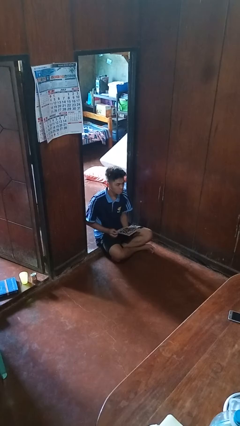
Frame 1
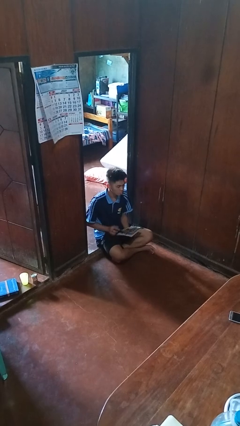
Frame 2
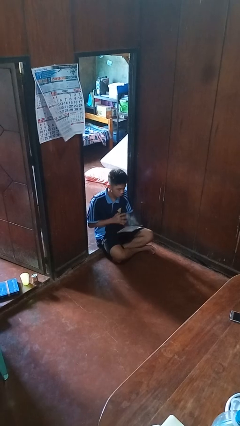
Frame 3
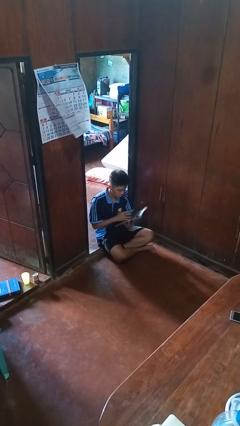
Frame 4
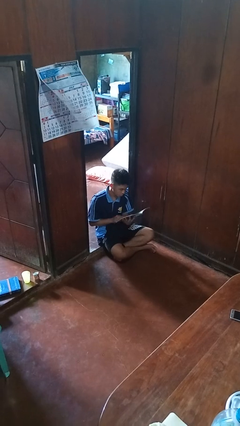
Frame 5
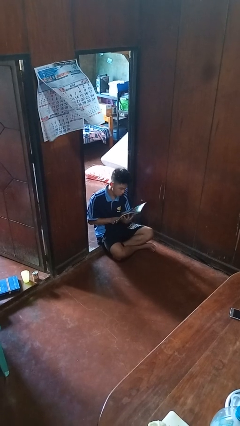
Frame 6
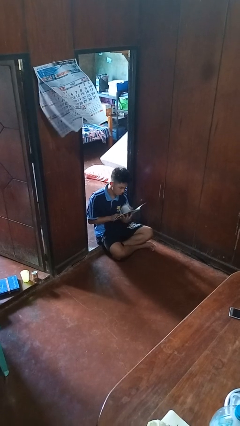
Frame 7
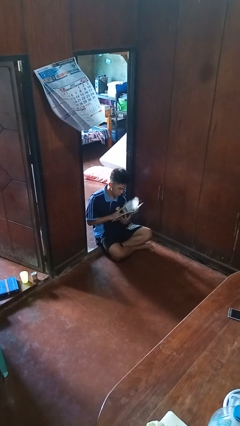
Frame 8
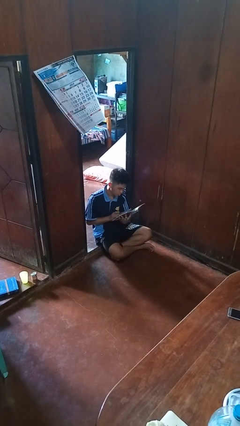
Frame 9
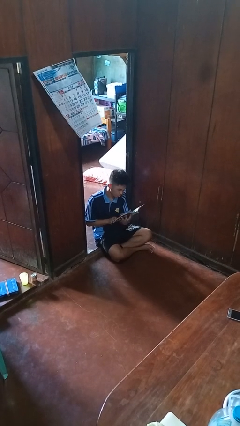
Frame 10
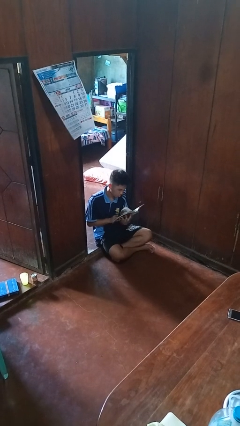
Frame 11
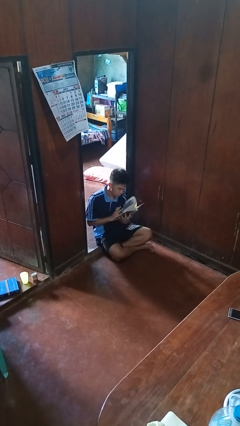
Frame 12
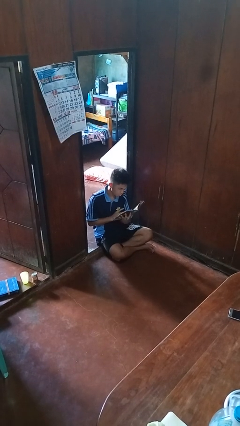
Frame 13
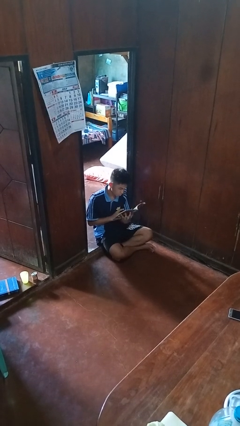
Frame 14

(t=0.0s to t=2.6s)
person reads magazine

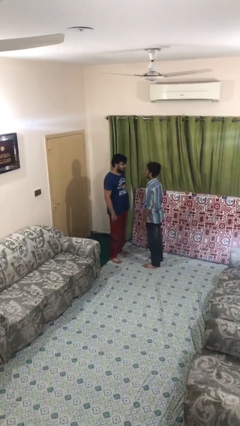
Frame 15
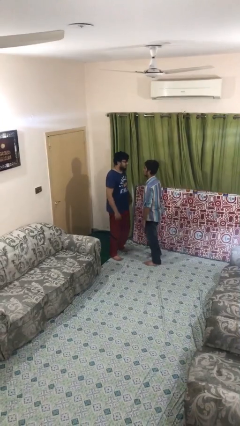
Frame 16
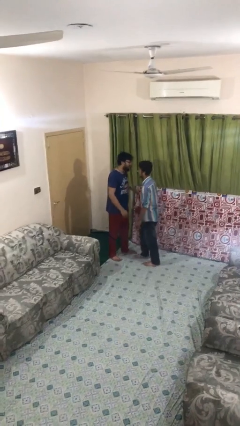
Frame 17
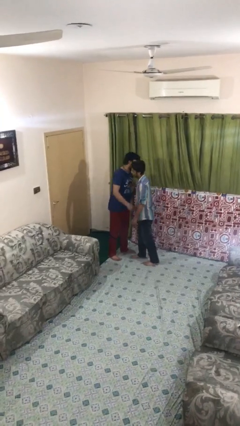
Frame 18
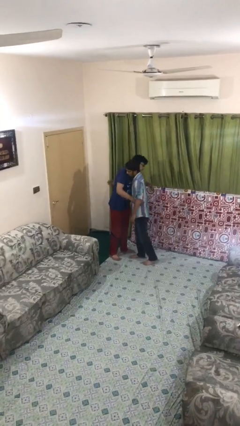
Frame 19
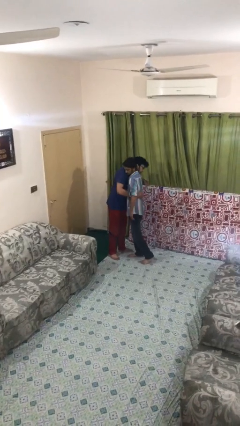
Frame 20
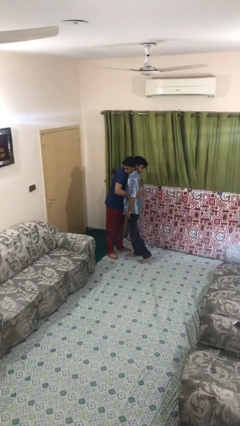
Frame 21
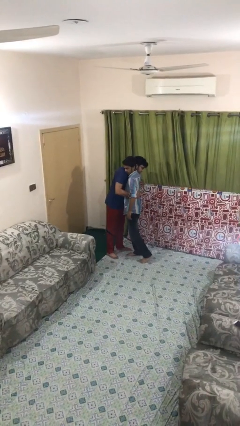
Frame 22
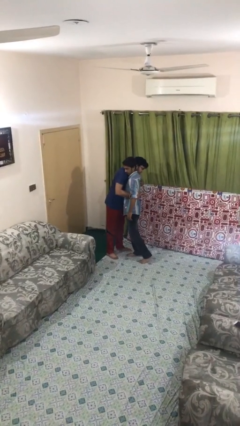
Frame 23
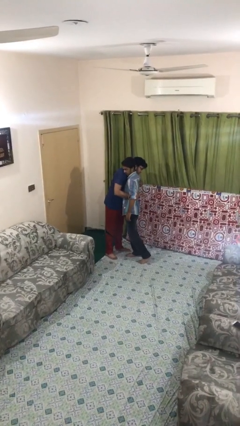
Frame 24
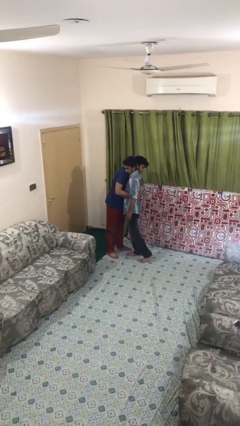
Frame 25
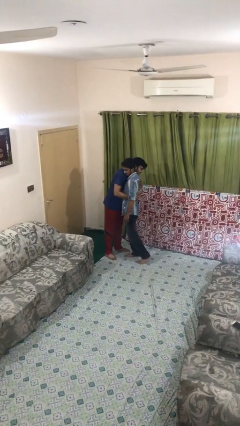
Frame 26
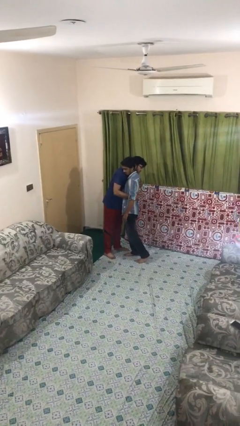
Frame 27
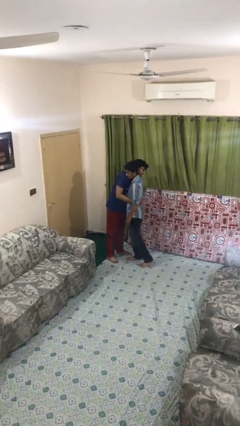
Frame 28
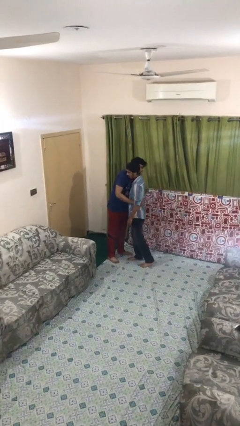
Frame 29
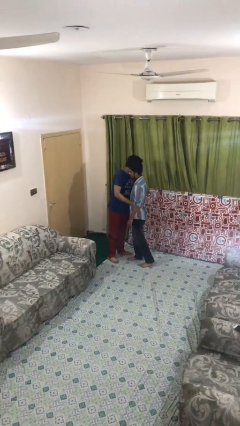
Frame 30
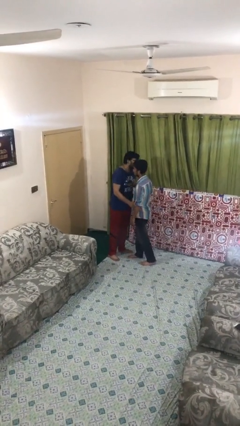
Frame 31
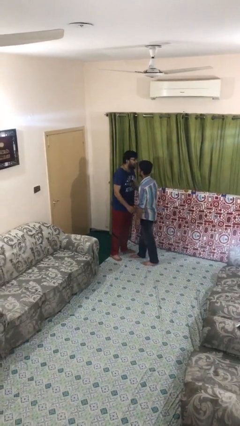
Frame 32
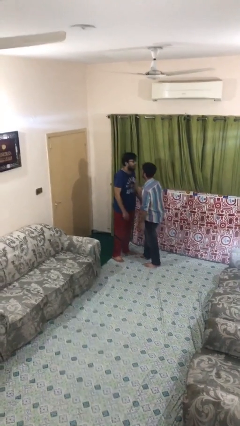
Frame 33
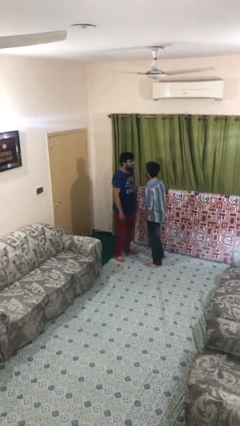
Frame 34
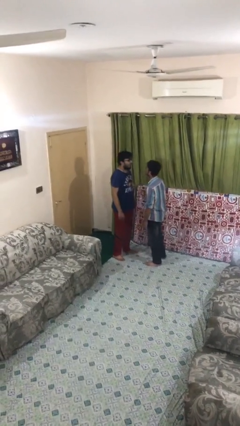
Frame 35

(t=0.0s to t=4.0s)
person embraces person

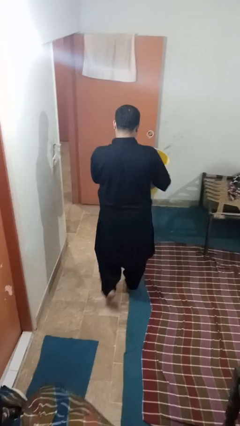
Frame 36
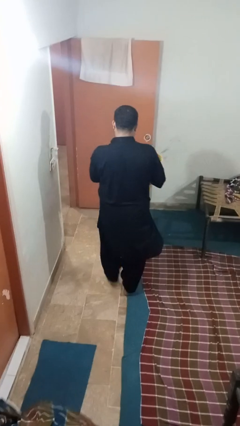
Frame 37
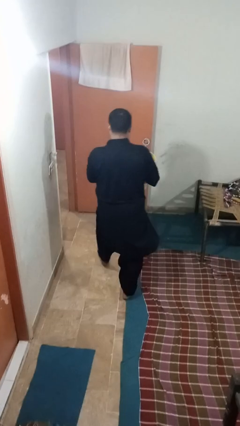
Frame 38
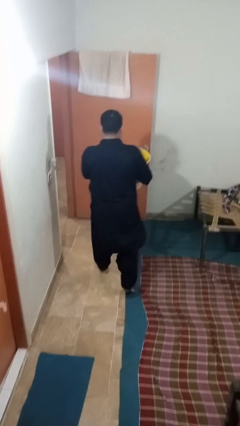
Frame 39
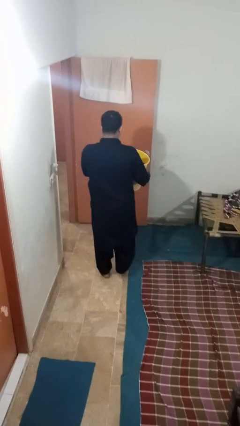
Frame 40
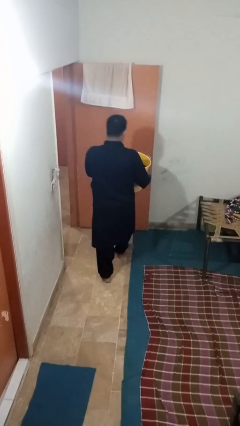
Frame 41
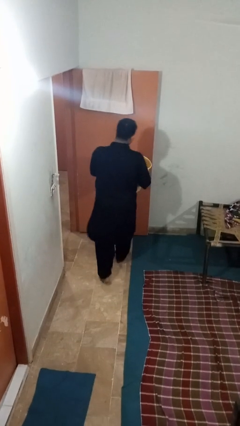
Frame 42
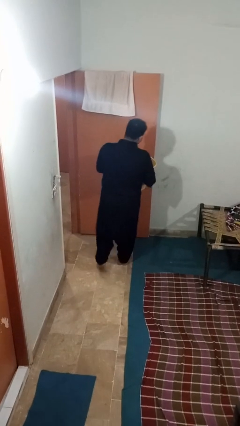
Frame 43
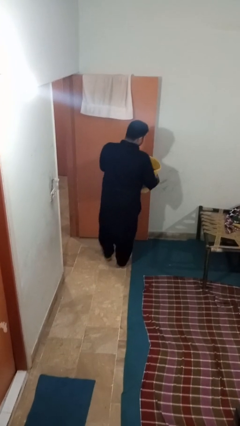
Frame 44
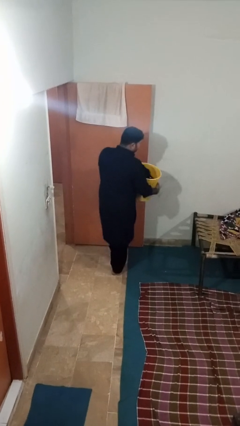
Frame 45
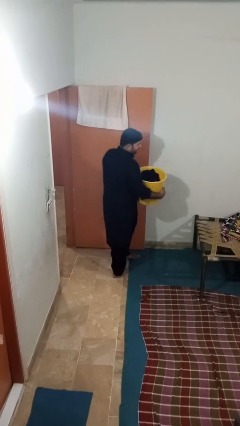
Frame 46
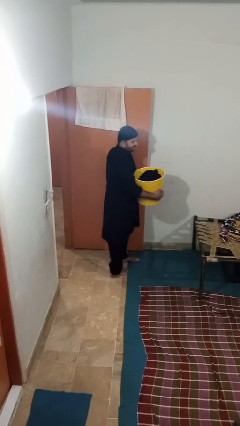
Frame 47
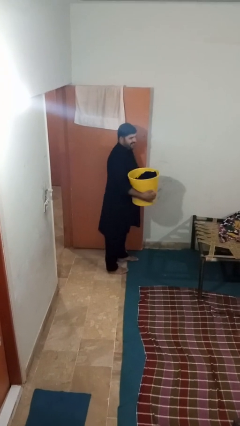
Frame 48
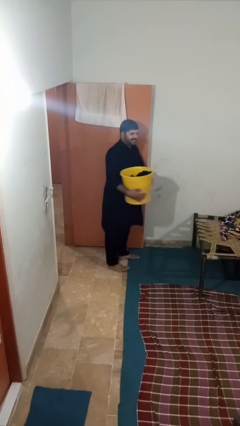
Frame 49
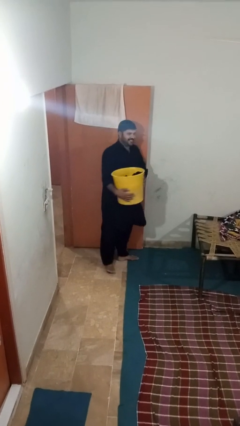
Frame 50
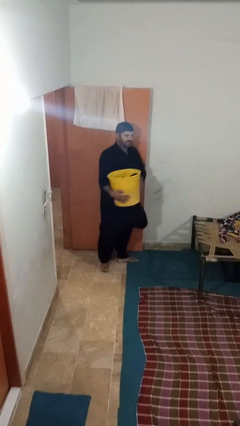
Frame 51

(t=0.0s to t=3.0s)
person carries laundry basket

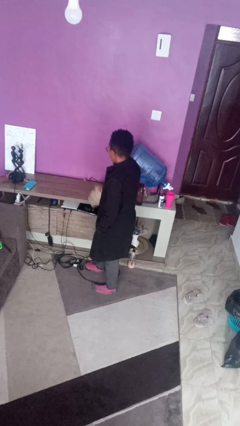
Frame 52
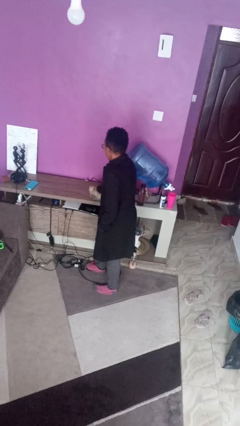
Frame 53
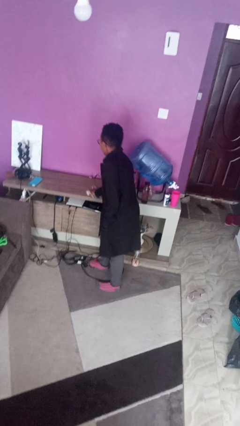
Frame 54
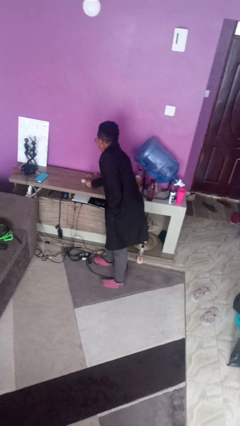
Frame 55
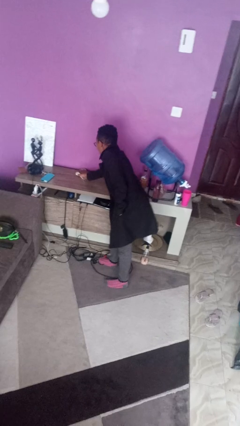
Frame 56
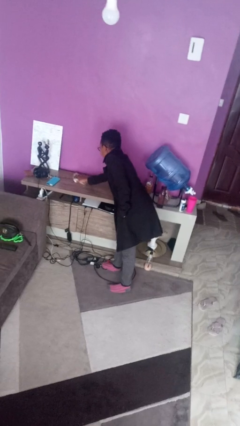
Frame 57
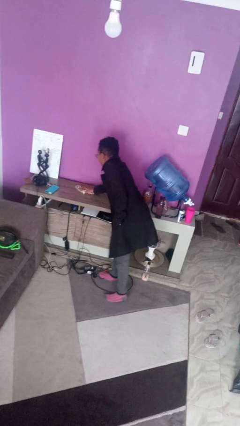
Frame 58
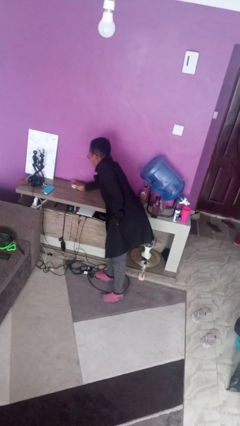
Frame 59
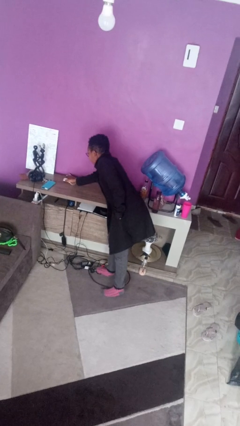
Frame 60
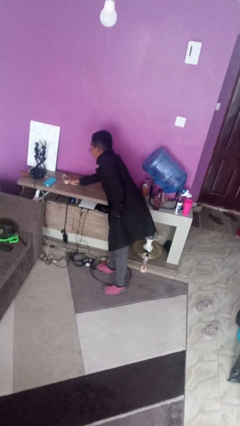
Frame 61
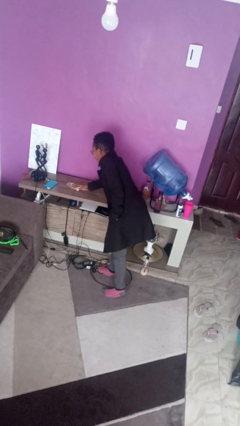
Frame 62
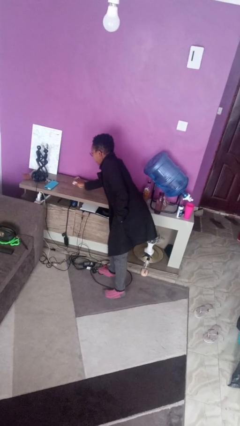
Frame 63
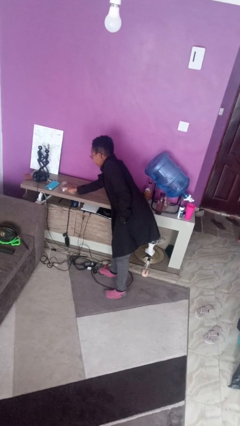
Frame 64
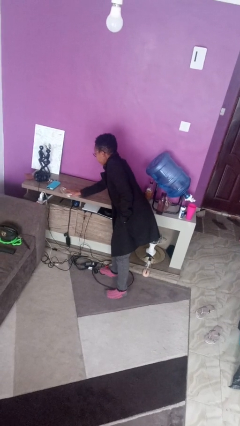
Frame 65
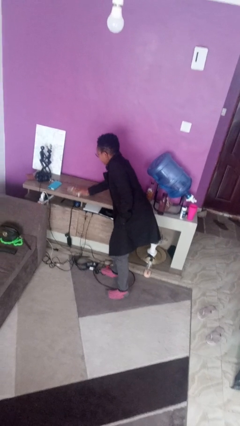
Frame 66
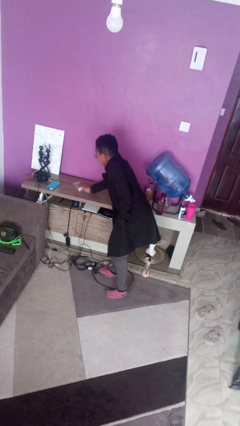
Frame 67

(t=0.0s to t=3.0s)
person cleans table with rag

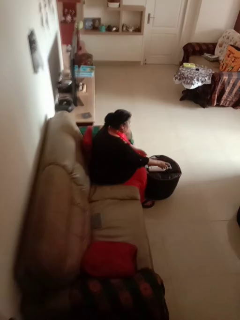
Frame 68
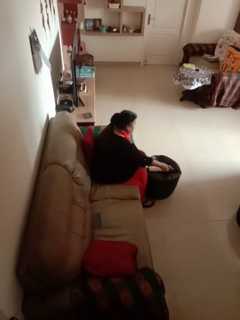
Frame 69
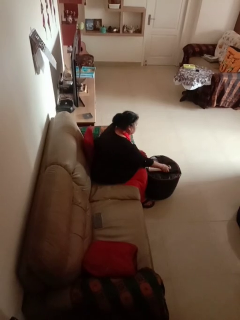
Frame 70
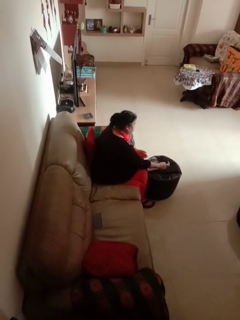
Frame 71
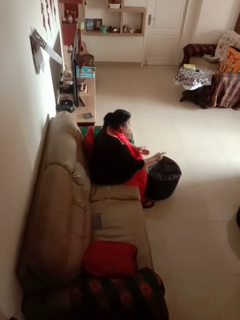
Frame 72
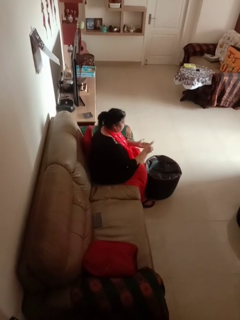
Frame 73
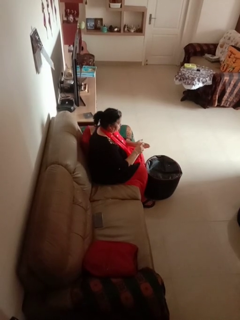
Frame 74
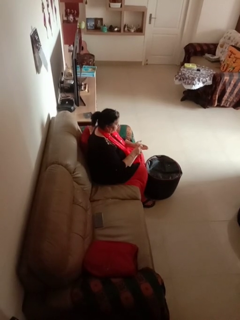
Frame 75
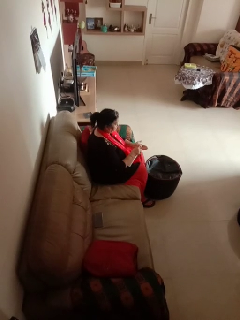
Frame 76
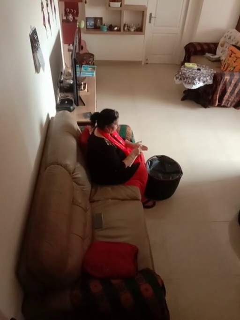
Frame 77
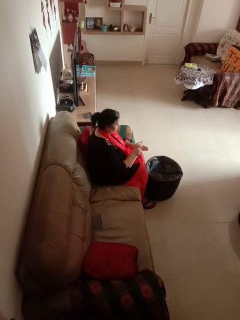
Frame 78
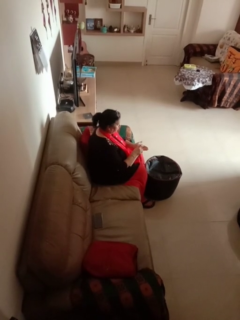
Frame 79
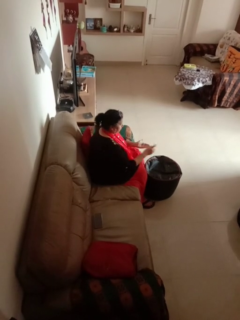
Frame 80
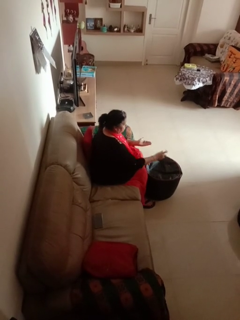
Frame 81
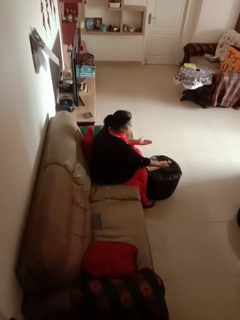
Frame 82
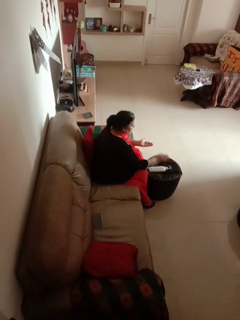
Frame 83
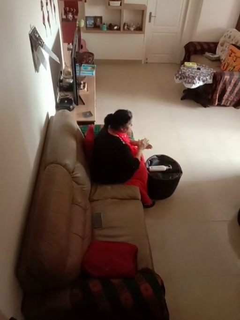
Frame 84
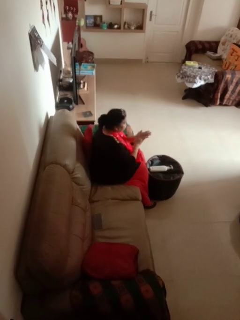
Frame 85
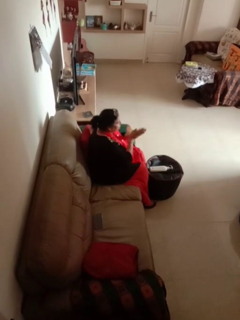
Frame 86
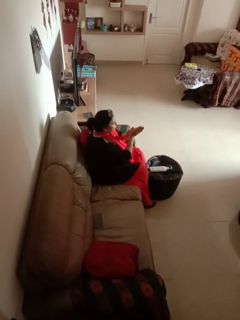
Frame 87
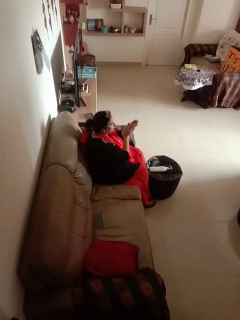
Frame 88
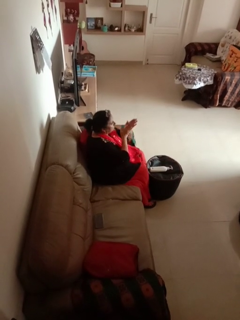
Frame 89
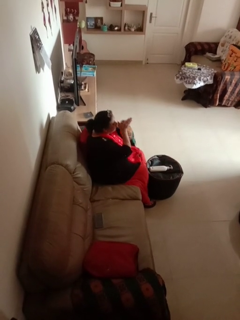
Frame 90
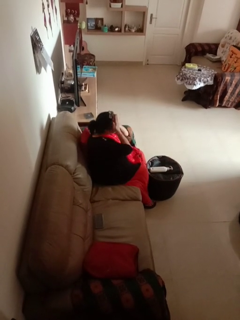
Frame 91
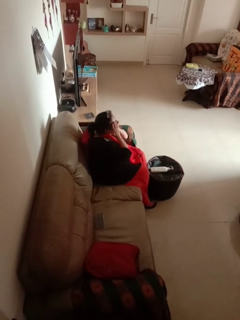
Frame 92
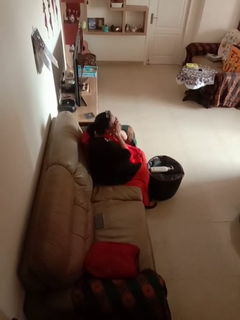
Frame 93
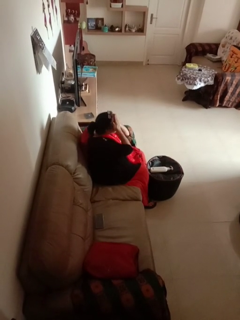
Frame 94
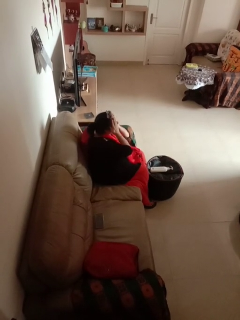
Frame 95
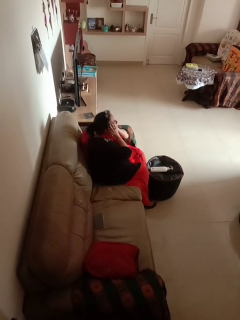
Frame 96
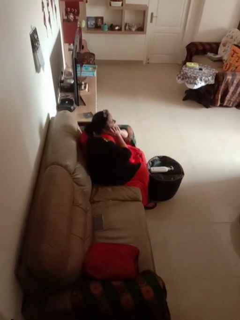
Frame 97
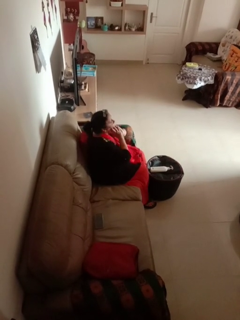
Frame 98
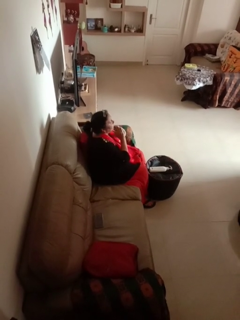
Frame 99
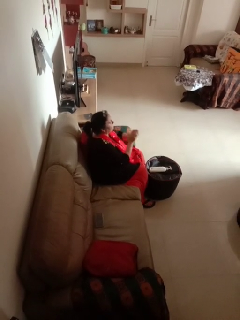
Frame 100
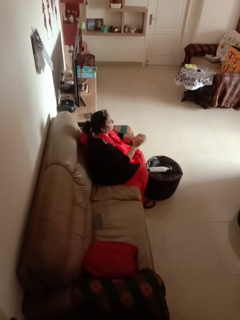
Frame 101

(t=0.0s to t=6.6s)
person applies facial moisturizer

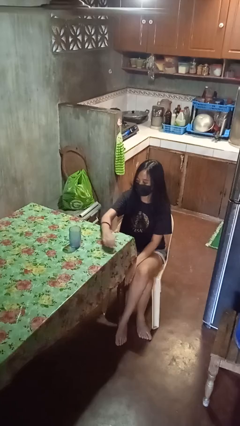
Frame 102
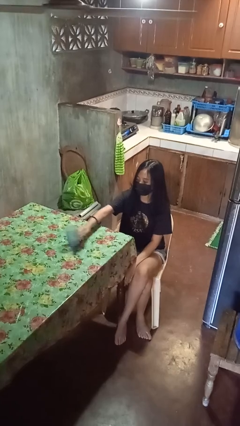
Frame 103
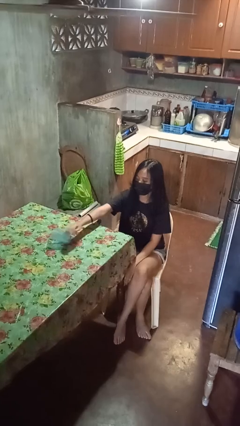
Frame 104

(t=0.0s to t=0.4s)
person knocks over glass
